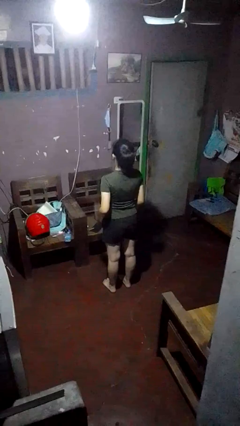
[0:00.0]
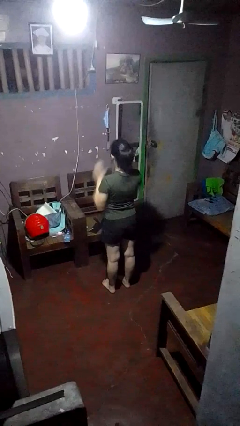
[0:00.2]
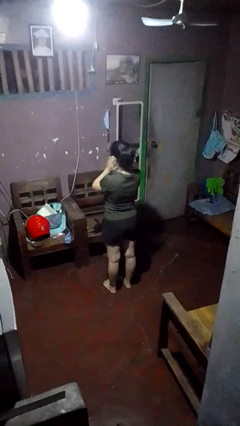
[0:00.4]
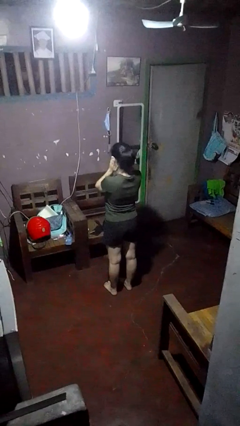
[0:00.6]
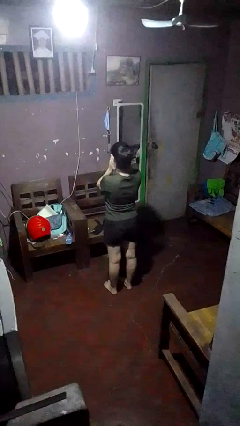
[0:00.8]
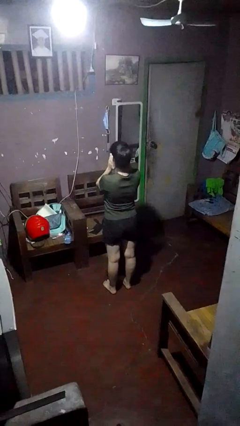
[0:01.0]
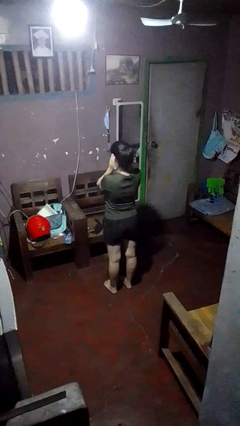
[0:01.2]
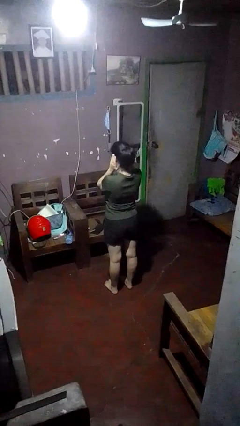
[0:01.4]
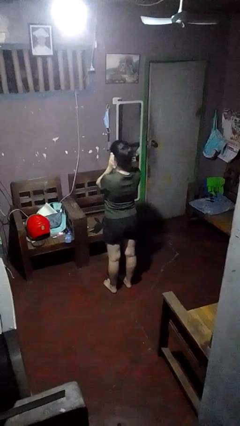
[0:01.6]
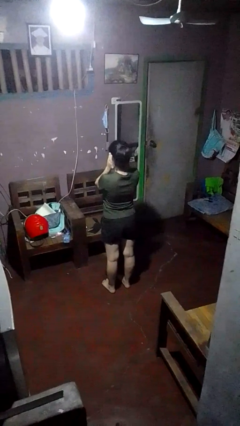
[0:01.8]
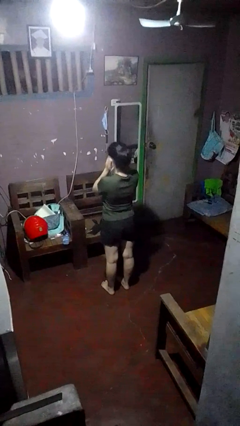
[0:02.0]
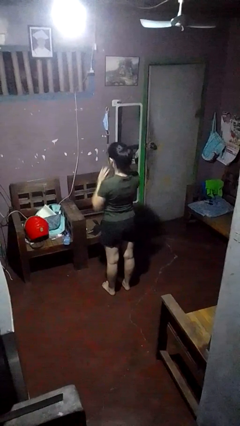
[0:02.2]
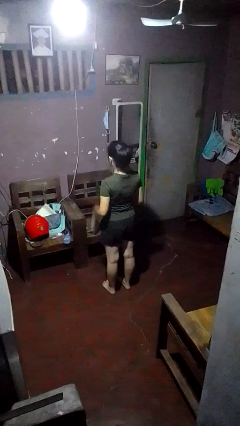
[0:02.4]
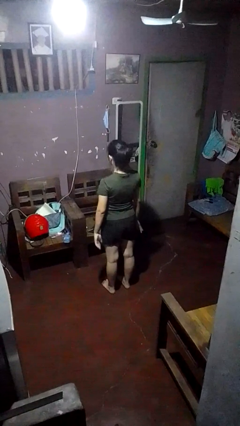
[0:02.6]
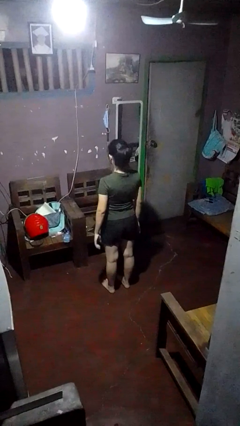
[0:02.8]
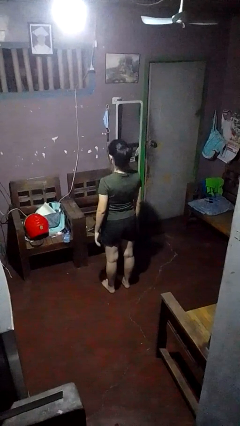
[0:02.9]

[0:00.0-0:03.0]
person puts fingers in ear

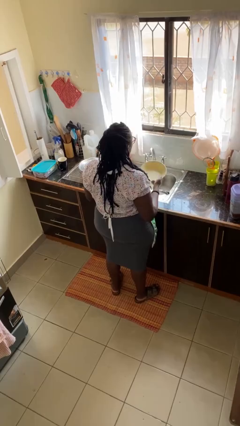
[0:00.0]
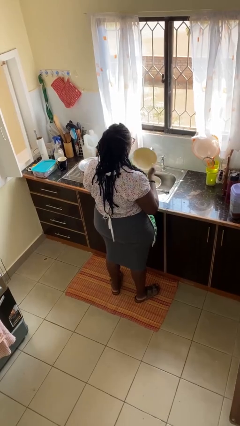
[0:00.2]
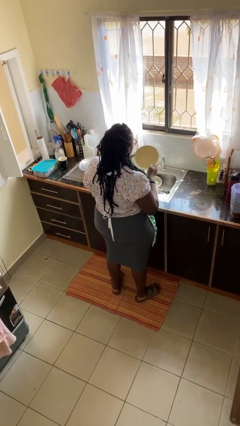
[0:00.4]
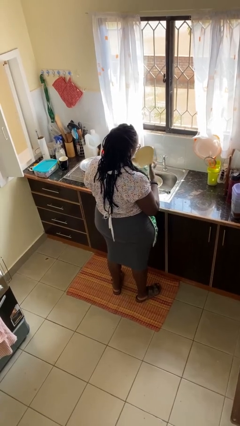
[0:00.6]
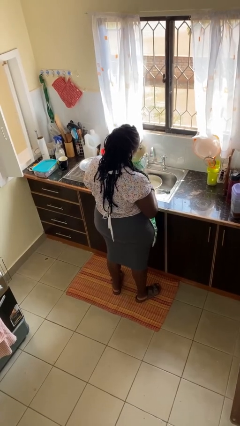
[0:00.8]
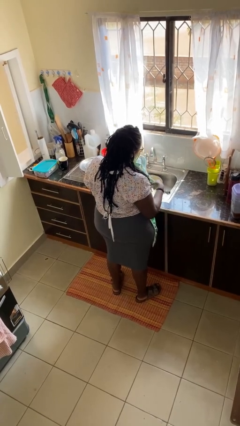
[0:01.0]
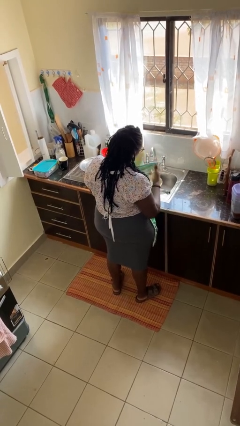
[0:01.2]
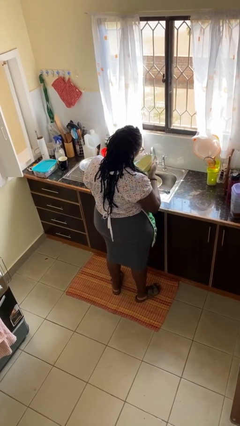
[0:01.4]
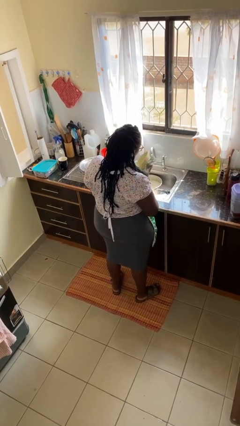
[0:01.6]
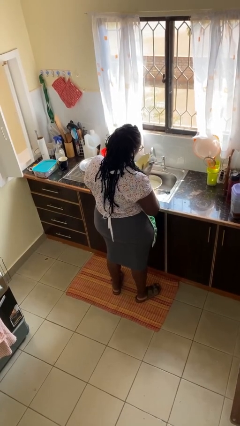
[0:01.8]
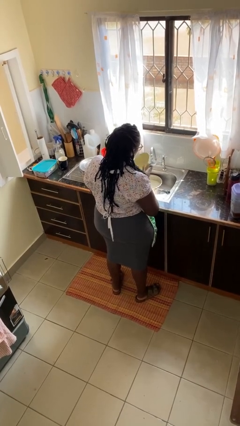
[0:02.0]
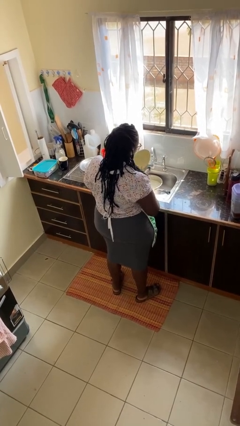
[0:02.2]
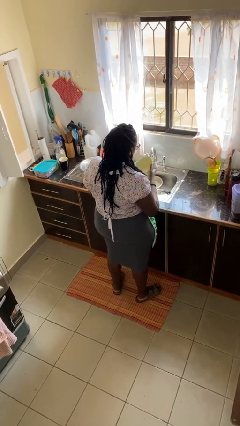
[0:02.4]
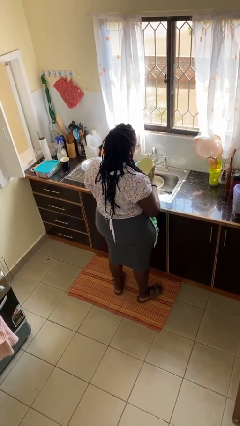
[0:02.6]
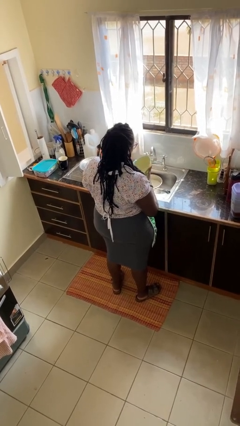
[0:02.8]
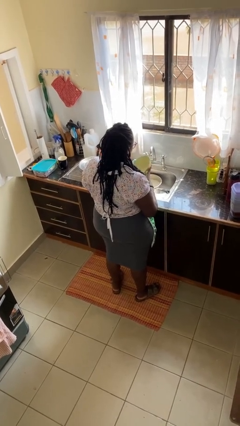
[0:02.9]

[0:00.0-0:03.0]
person dries dish

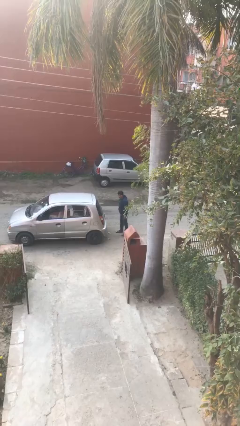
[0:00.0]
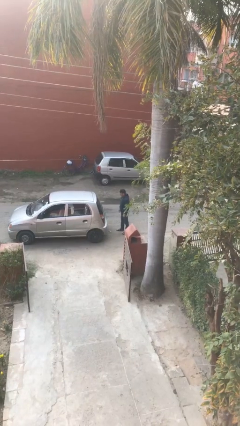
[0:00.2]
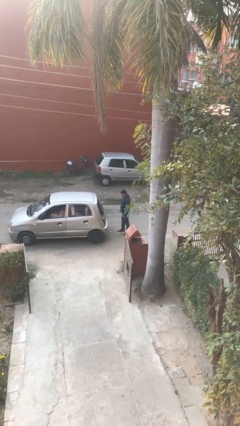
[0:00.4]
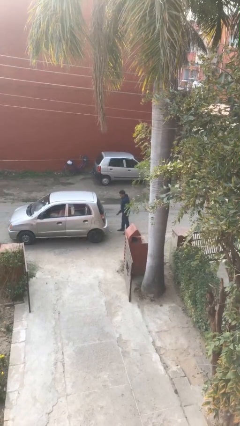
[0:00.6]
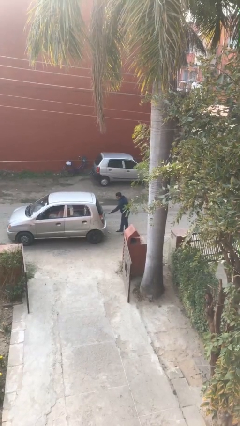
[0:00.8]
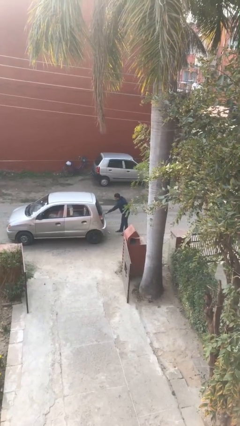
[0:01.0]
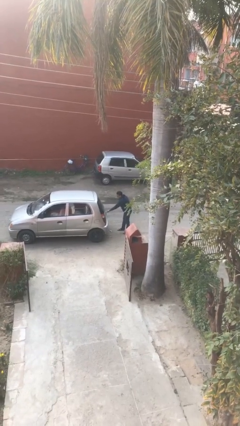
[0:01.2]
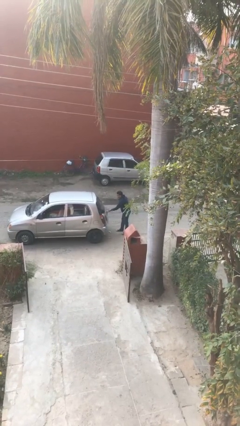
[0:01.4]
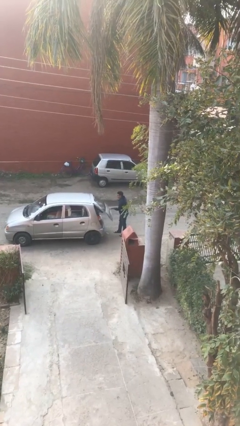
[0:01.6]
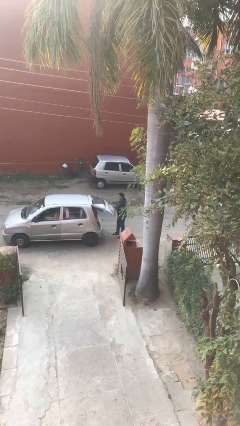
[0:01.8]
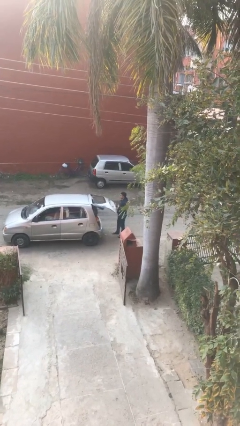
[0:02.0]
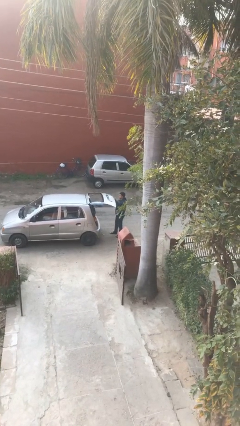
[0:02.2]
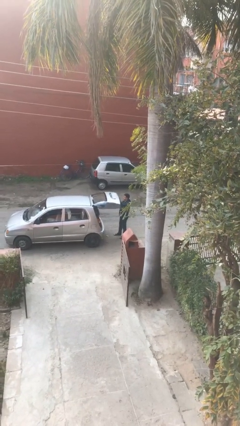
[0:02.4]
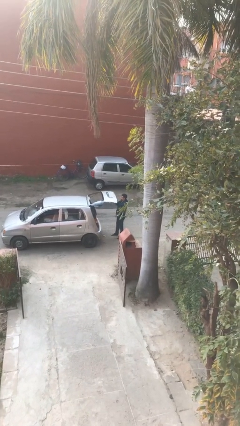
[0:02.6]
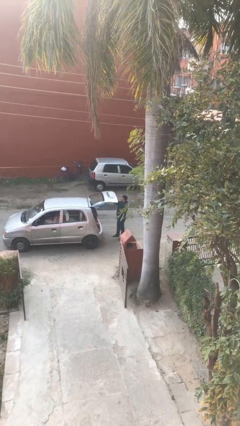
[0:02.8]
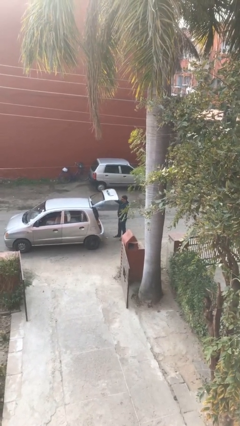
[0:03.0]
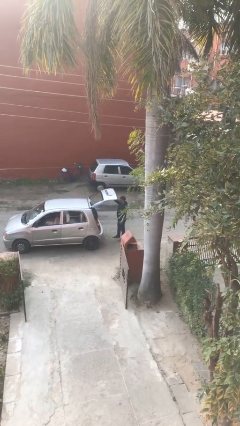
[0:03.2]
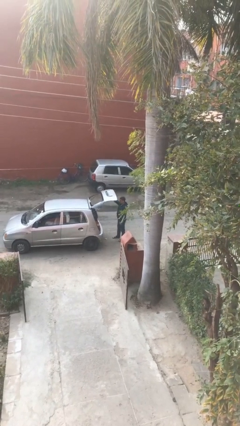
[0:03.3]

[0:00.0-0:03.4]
person opens car trunk

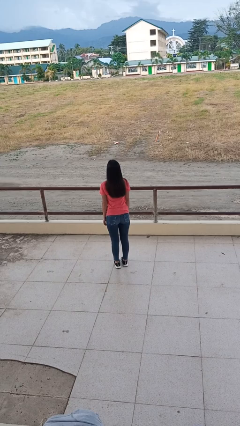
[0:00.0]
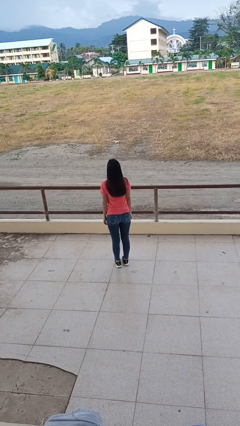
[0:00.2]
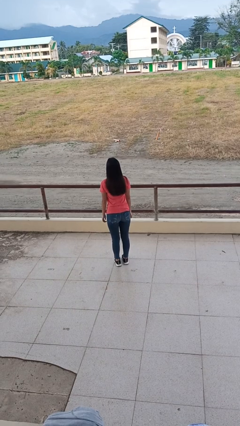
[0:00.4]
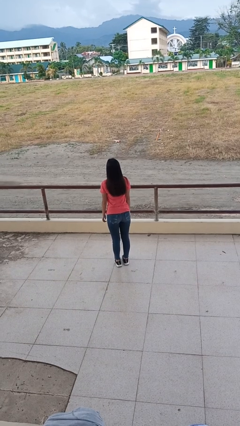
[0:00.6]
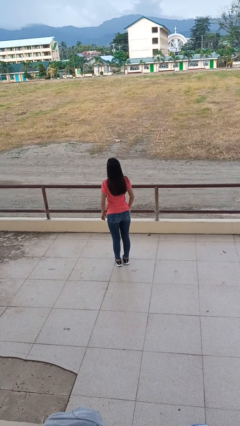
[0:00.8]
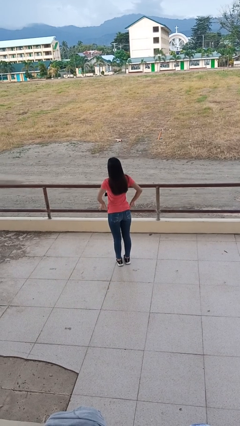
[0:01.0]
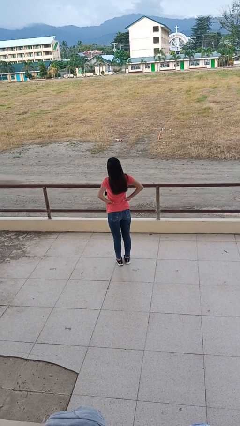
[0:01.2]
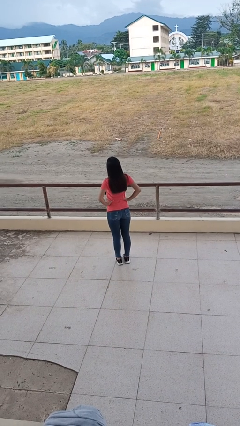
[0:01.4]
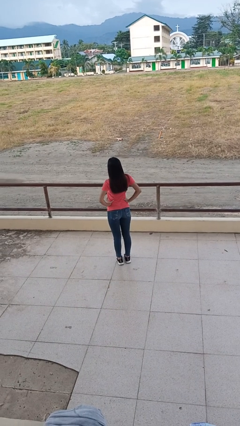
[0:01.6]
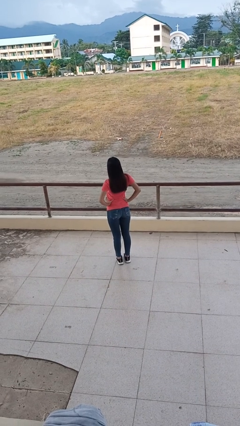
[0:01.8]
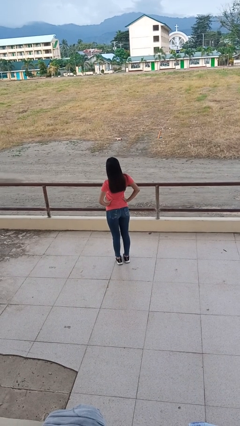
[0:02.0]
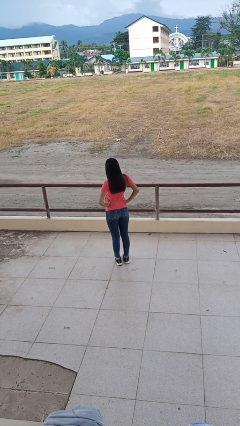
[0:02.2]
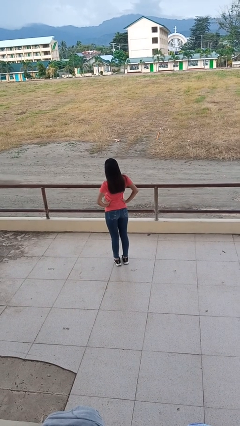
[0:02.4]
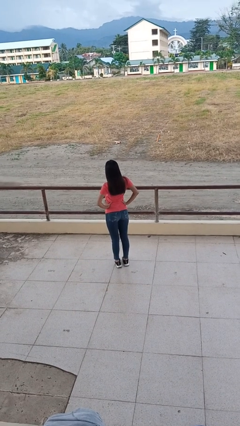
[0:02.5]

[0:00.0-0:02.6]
person stretches back

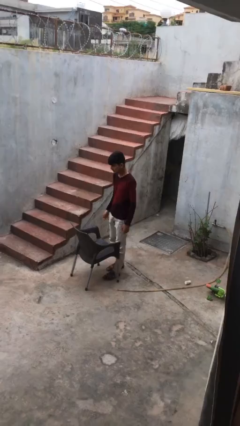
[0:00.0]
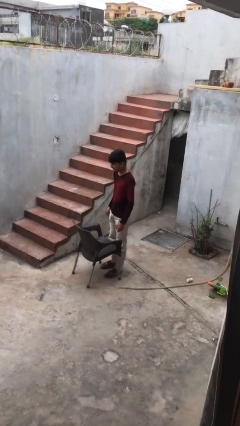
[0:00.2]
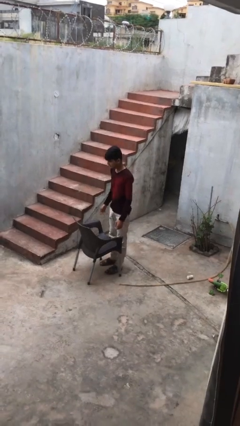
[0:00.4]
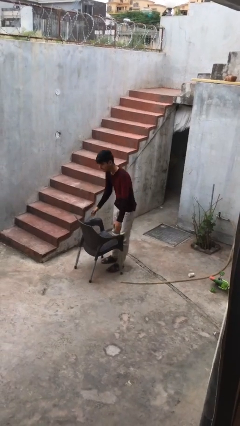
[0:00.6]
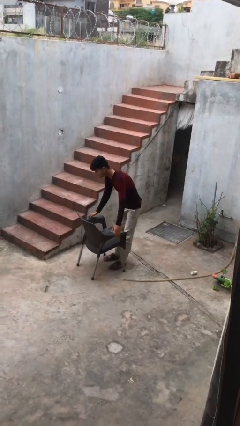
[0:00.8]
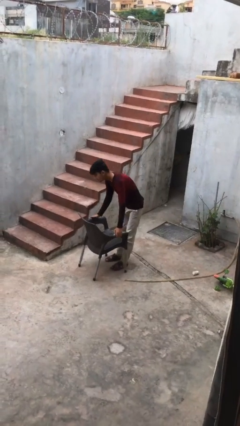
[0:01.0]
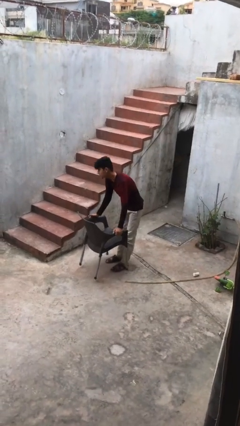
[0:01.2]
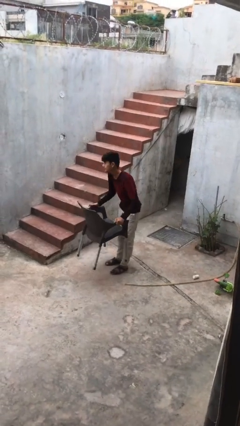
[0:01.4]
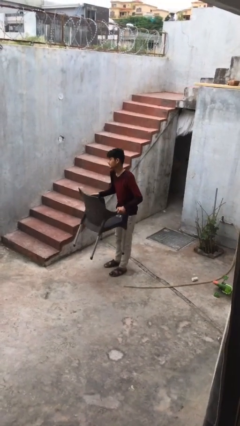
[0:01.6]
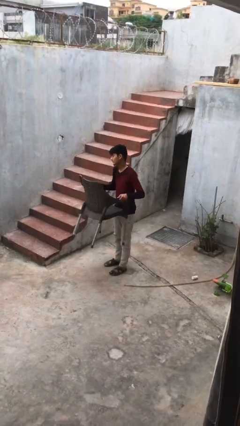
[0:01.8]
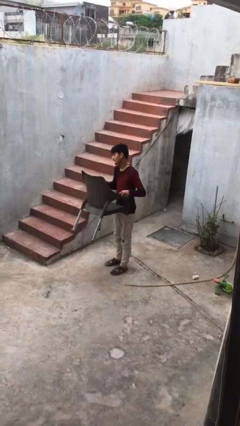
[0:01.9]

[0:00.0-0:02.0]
person picks up object from floor

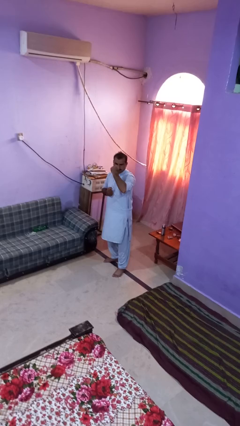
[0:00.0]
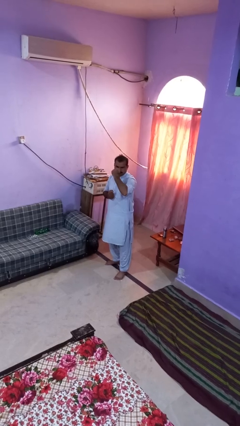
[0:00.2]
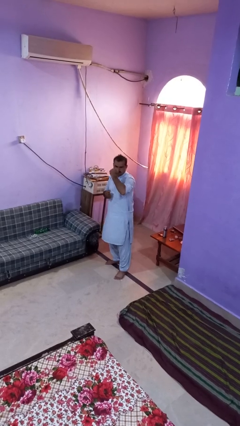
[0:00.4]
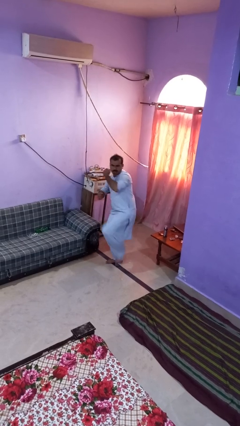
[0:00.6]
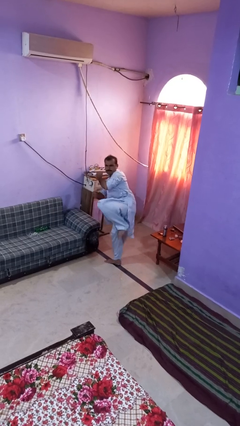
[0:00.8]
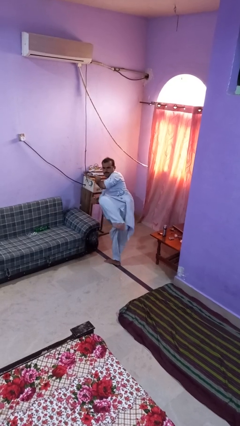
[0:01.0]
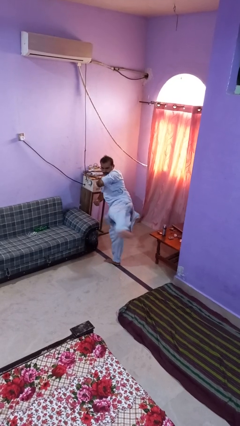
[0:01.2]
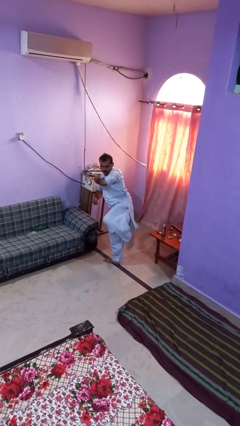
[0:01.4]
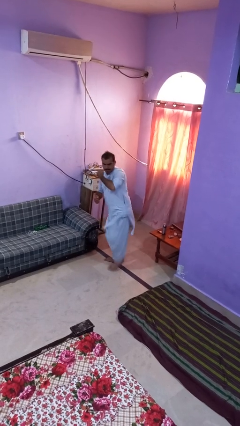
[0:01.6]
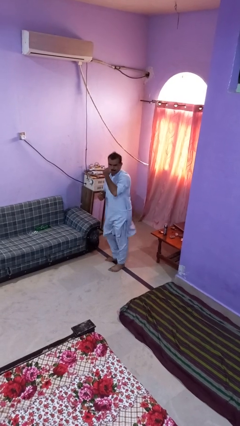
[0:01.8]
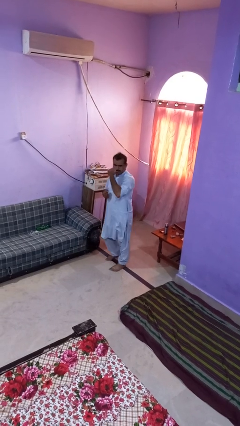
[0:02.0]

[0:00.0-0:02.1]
person karate kicks

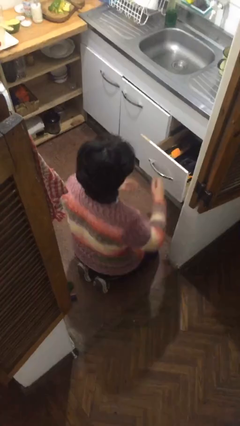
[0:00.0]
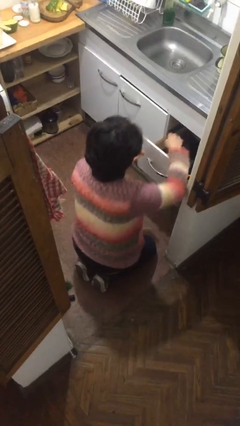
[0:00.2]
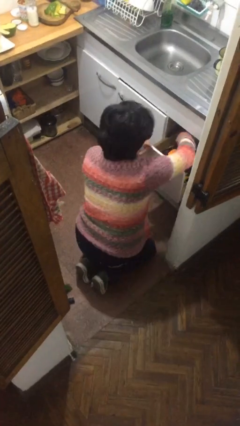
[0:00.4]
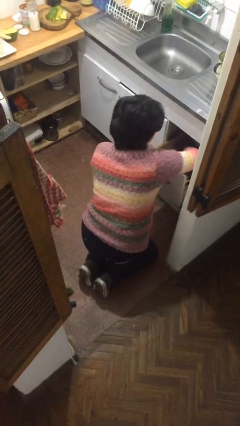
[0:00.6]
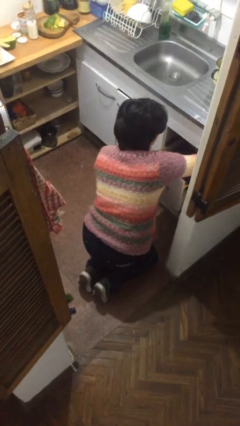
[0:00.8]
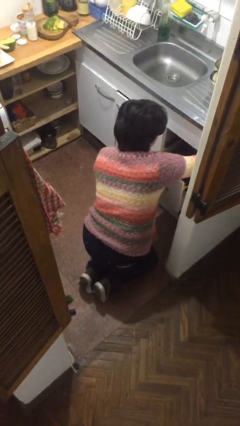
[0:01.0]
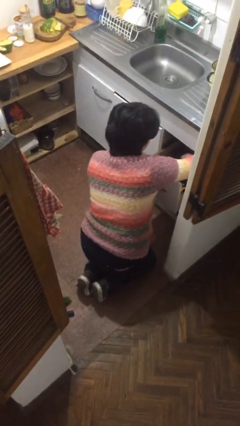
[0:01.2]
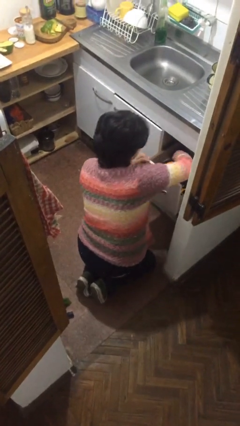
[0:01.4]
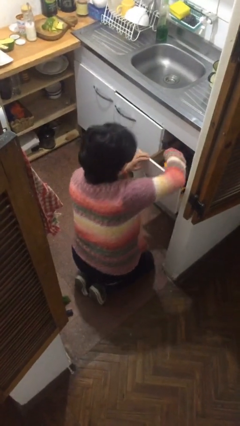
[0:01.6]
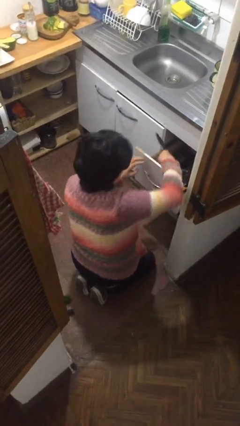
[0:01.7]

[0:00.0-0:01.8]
person takes object from kitchen drawer
